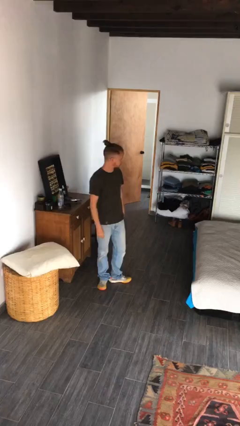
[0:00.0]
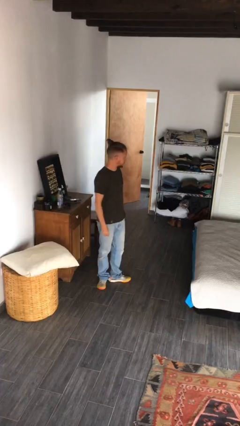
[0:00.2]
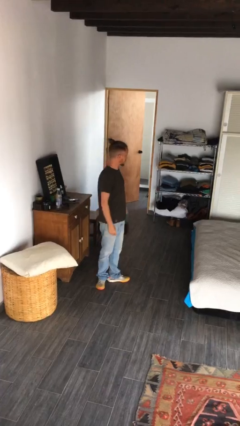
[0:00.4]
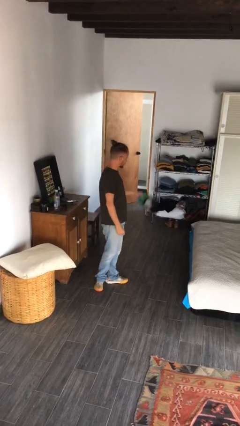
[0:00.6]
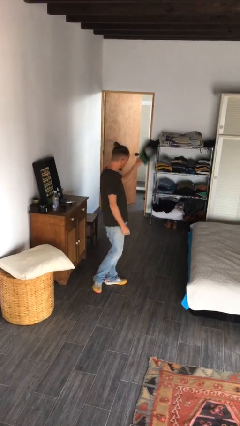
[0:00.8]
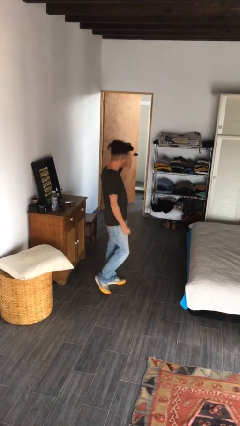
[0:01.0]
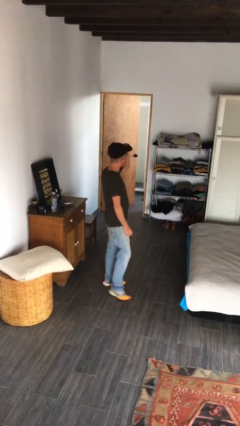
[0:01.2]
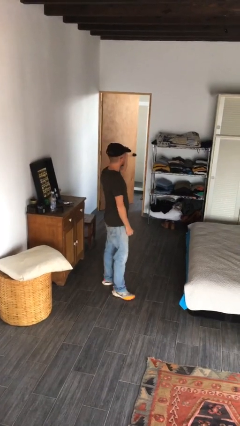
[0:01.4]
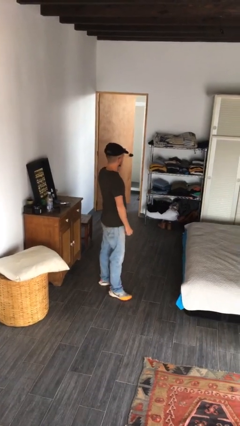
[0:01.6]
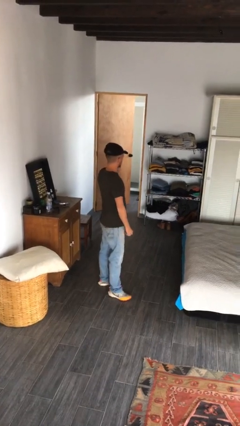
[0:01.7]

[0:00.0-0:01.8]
person puts on hat

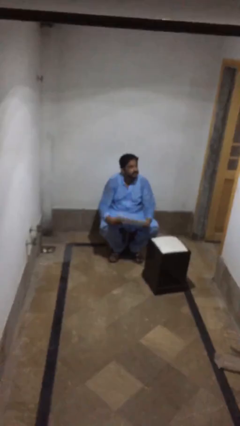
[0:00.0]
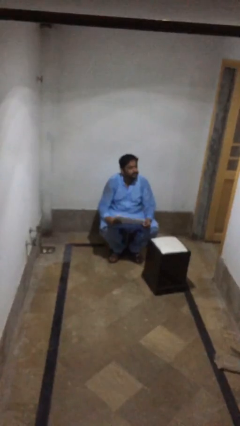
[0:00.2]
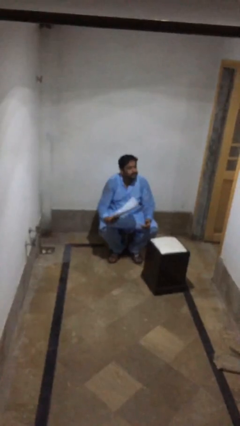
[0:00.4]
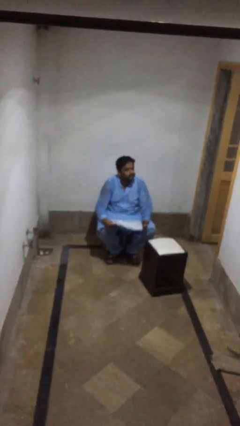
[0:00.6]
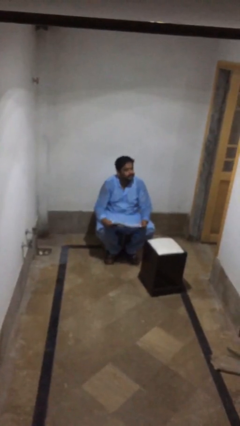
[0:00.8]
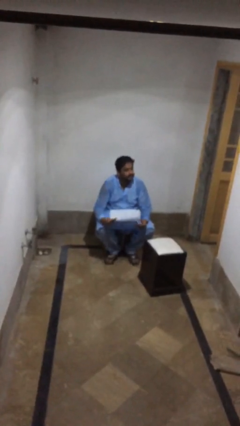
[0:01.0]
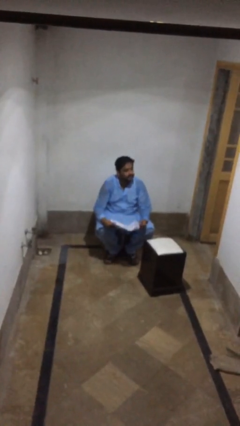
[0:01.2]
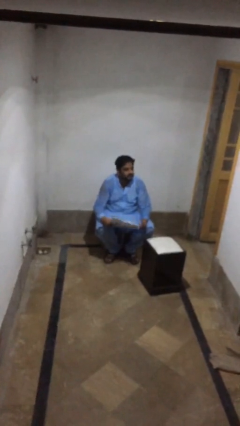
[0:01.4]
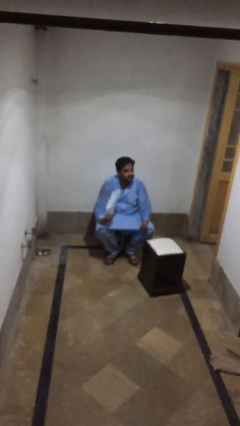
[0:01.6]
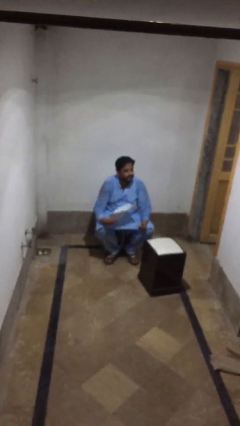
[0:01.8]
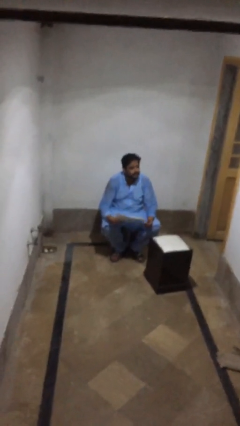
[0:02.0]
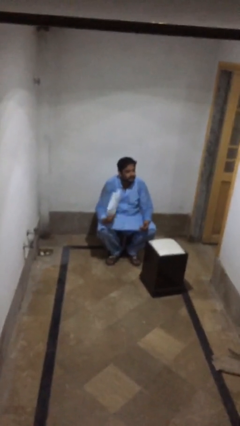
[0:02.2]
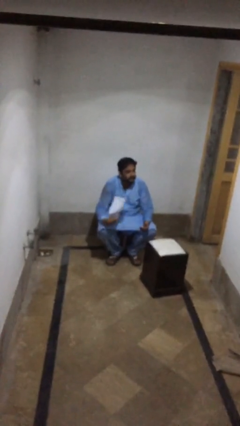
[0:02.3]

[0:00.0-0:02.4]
person sits down

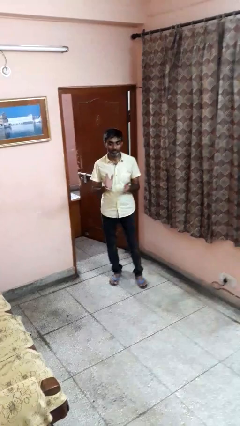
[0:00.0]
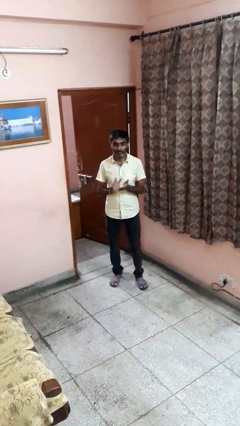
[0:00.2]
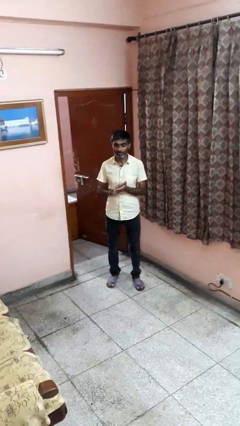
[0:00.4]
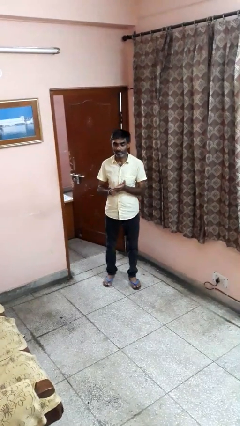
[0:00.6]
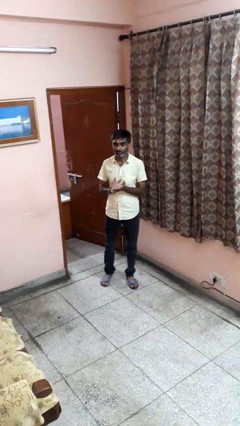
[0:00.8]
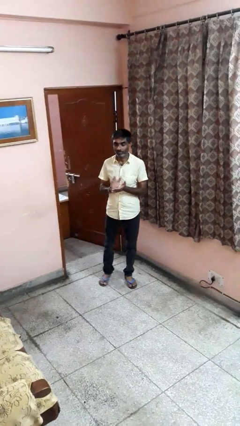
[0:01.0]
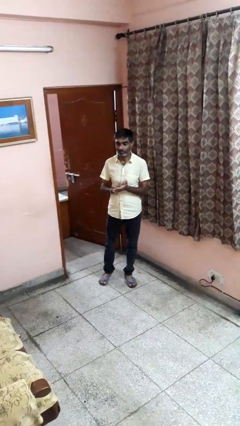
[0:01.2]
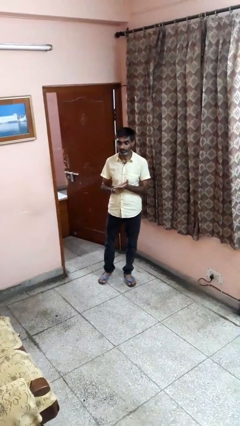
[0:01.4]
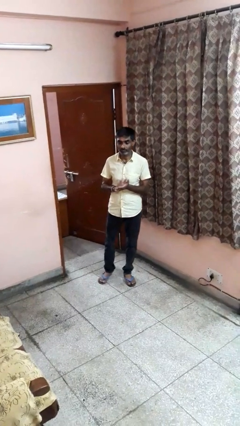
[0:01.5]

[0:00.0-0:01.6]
person claps hands

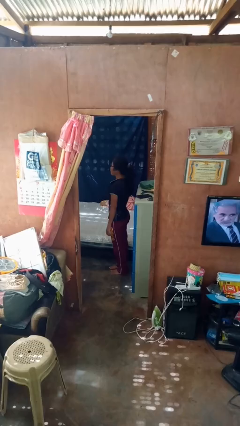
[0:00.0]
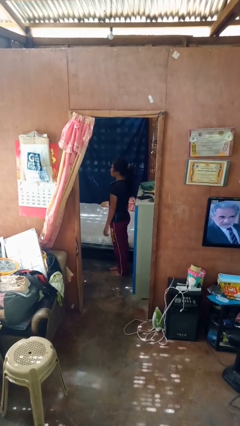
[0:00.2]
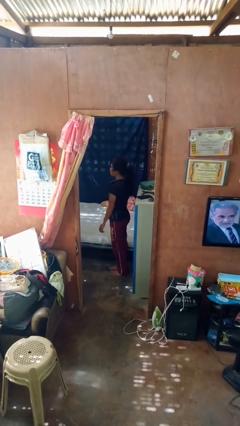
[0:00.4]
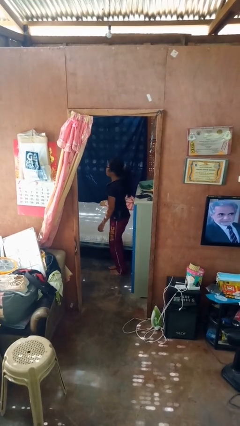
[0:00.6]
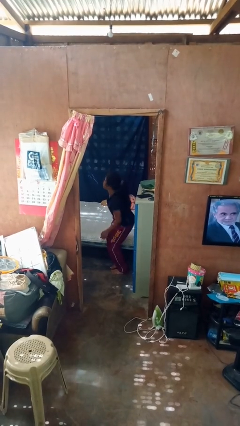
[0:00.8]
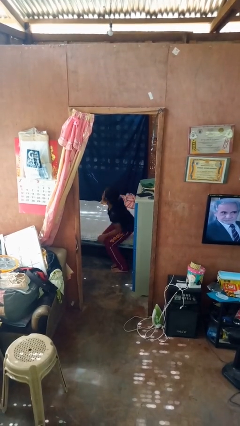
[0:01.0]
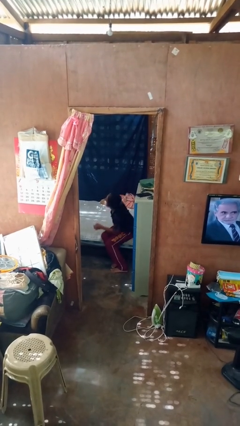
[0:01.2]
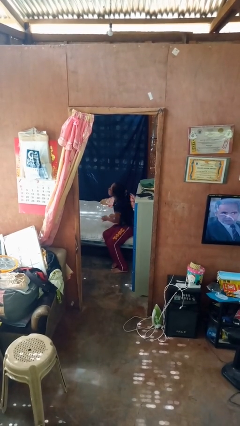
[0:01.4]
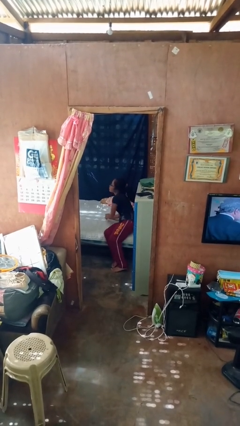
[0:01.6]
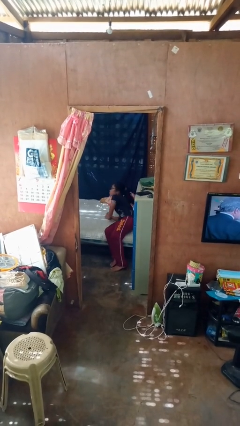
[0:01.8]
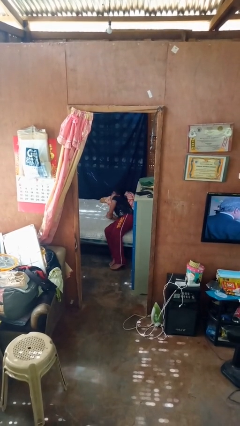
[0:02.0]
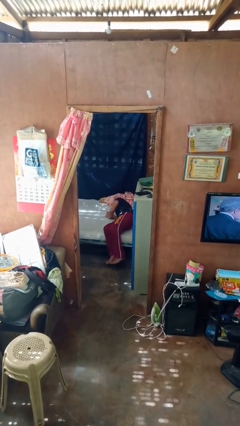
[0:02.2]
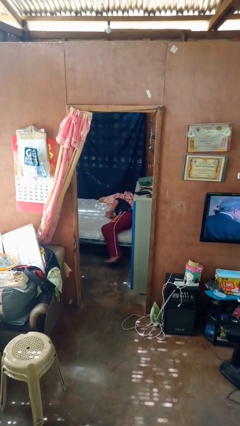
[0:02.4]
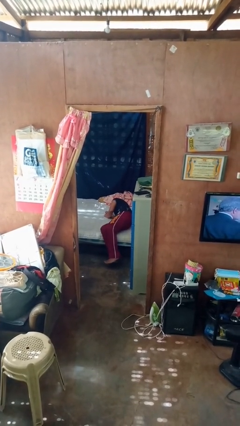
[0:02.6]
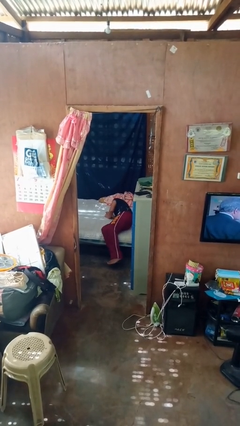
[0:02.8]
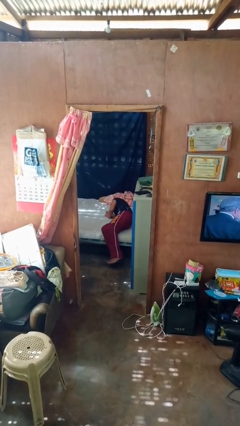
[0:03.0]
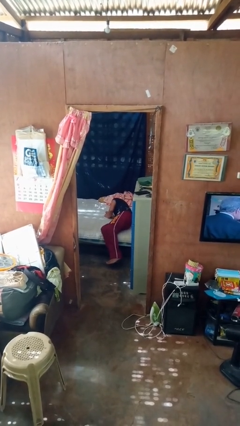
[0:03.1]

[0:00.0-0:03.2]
person lies down on bed

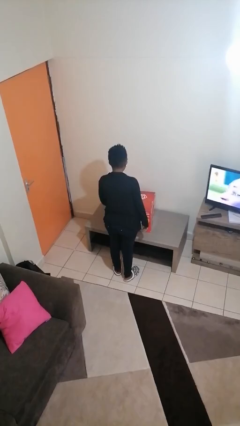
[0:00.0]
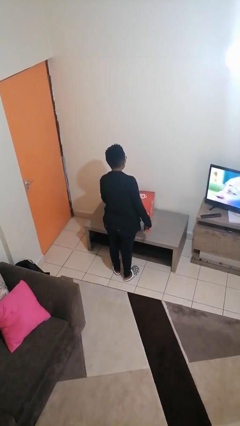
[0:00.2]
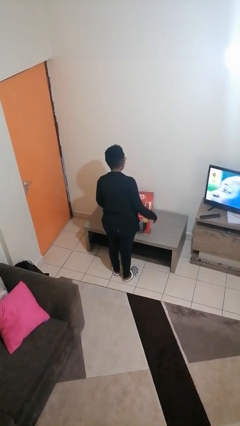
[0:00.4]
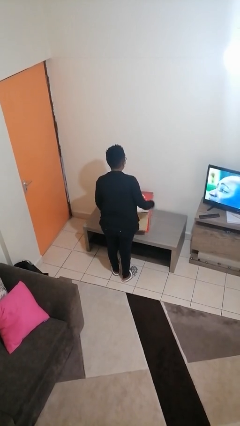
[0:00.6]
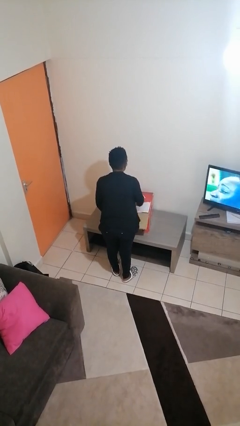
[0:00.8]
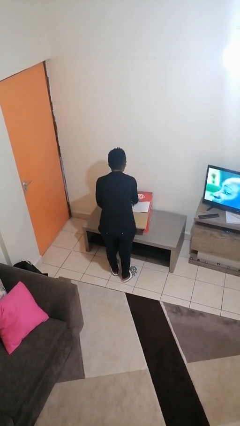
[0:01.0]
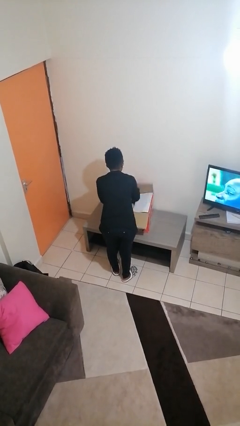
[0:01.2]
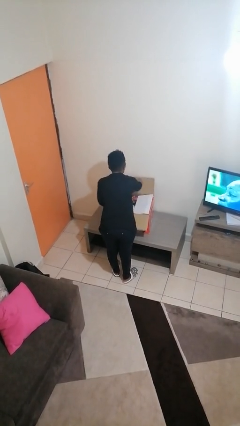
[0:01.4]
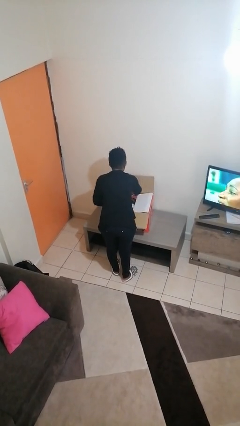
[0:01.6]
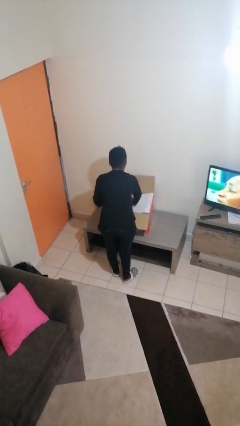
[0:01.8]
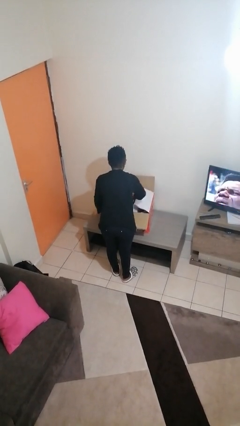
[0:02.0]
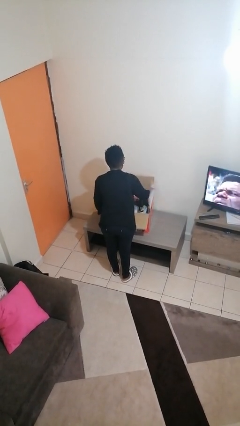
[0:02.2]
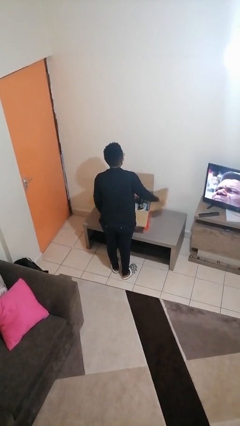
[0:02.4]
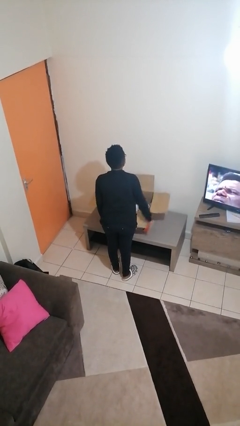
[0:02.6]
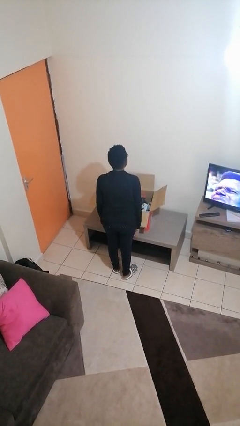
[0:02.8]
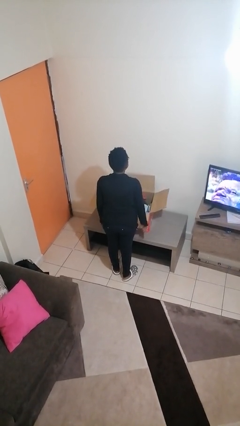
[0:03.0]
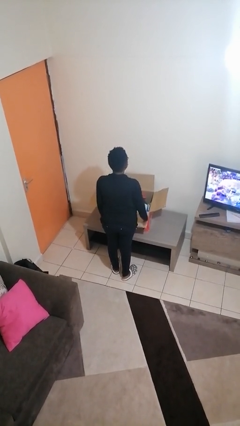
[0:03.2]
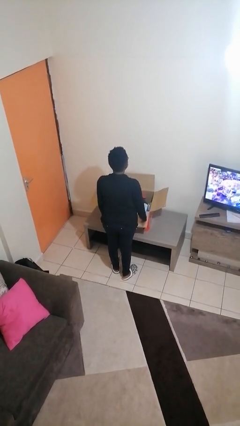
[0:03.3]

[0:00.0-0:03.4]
person opens box

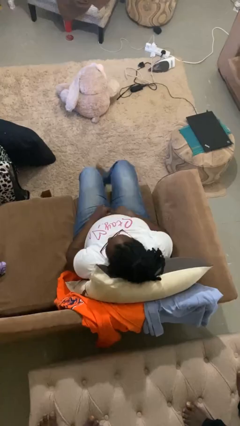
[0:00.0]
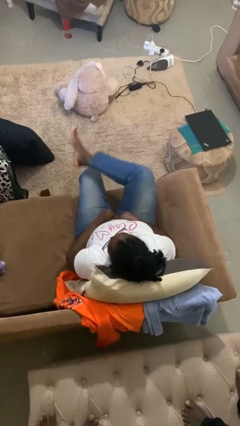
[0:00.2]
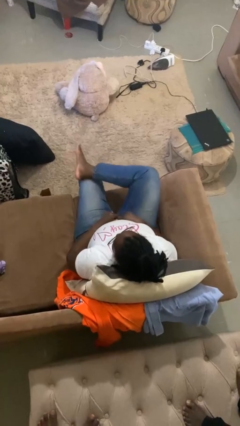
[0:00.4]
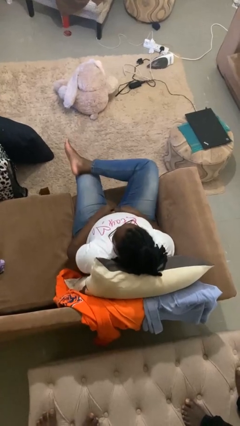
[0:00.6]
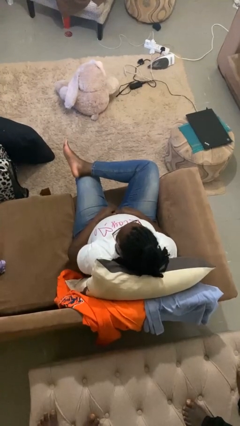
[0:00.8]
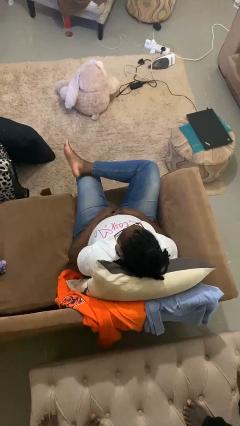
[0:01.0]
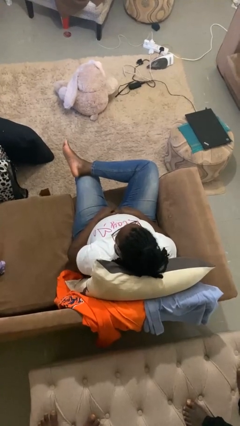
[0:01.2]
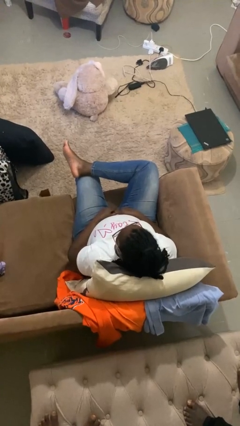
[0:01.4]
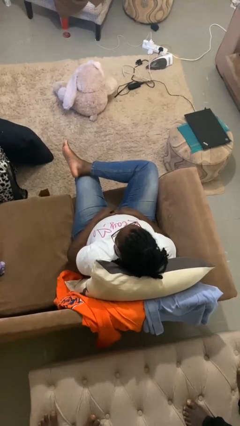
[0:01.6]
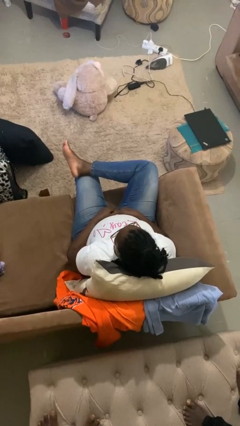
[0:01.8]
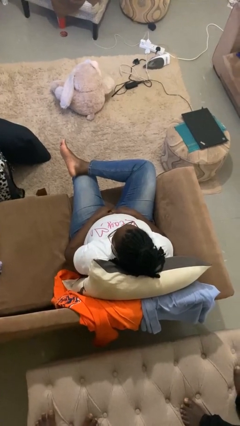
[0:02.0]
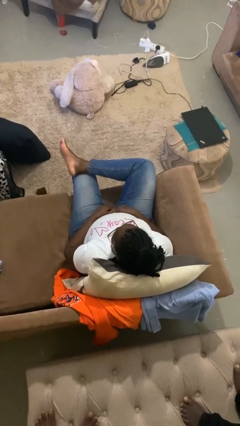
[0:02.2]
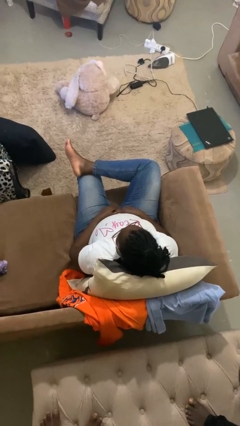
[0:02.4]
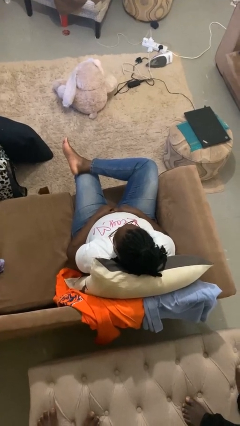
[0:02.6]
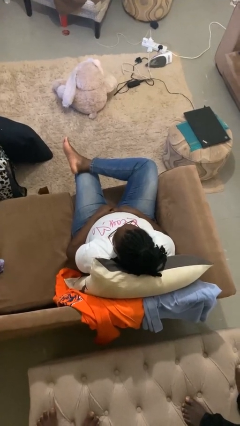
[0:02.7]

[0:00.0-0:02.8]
person crosses legs

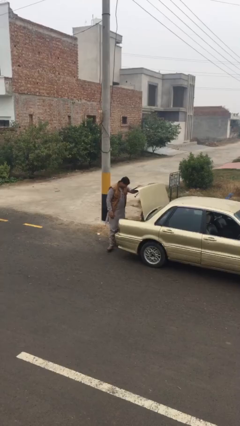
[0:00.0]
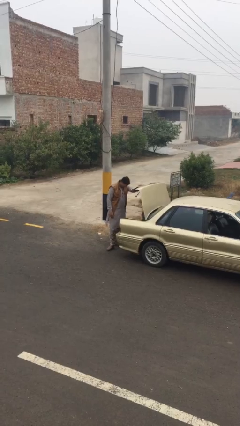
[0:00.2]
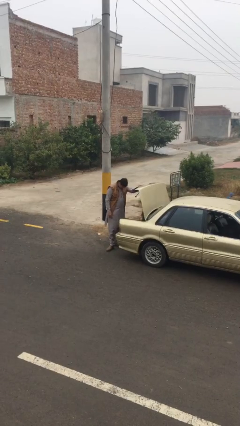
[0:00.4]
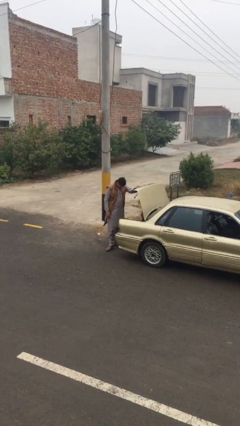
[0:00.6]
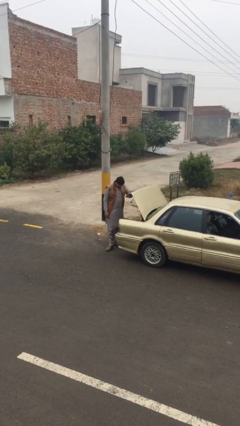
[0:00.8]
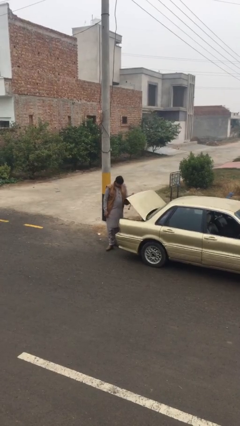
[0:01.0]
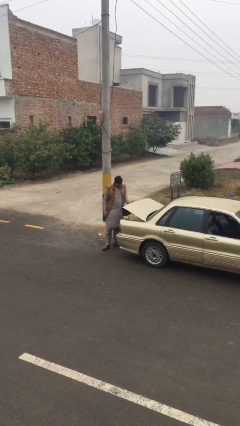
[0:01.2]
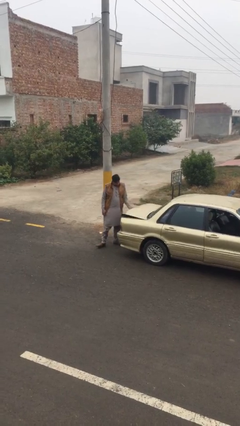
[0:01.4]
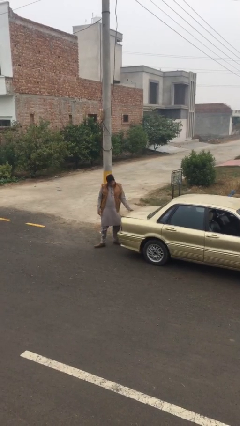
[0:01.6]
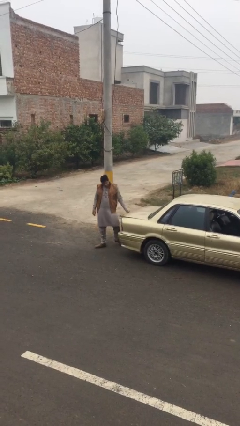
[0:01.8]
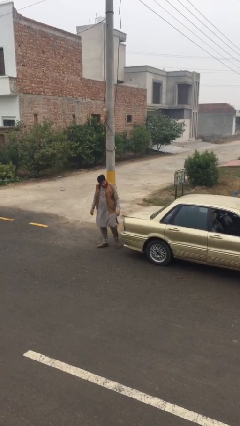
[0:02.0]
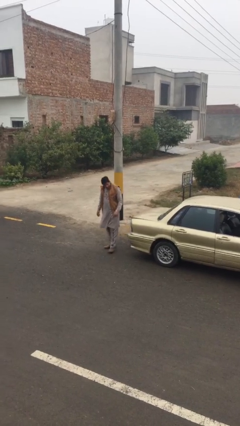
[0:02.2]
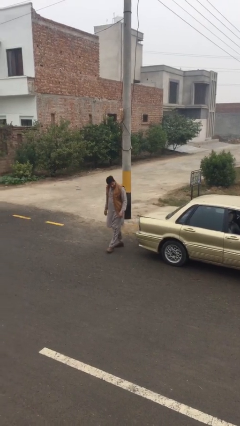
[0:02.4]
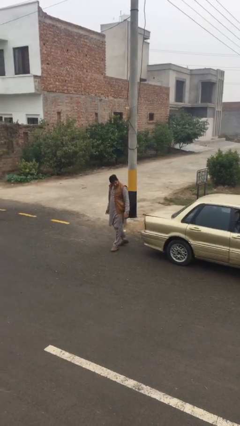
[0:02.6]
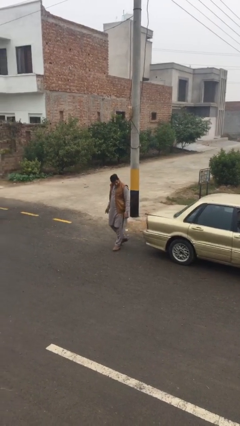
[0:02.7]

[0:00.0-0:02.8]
person closes car trunk
